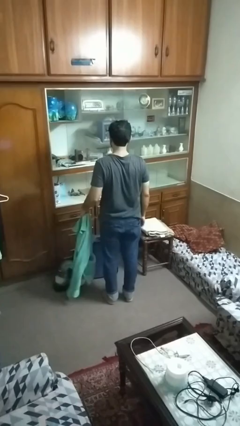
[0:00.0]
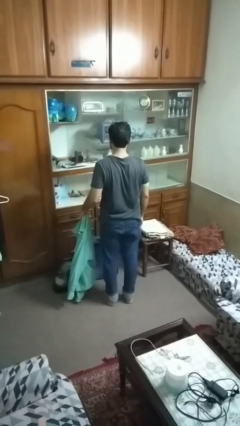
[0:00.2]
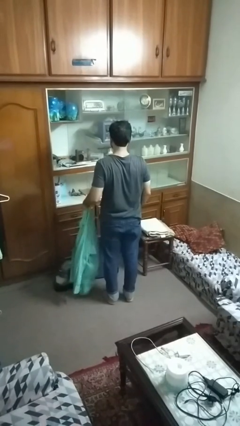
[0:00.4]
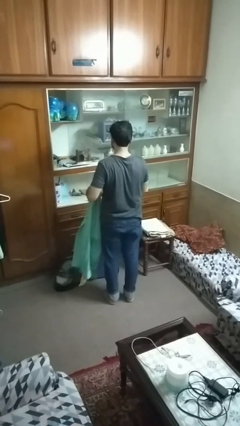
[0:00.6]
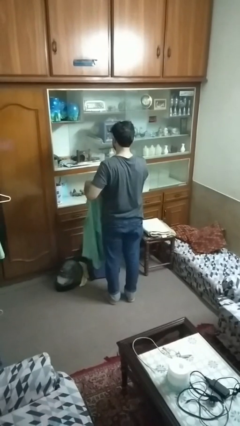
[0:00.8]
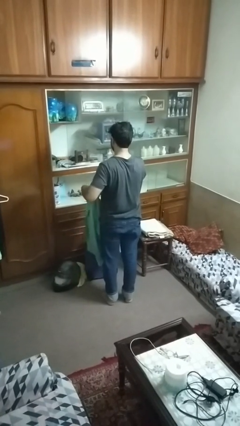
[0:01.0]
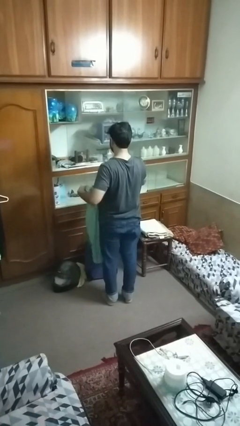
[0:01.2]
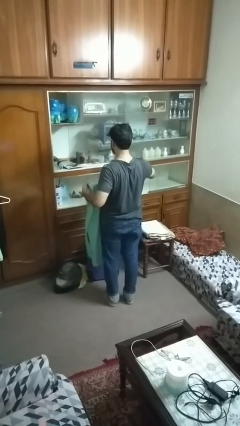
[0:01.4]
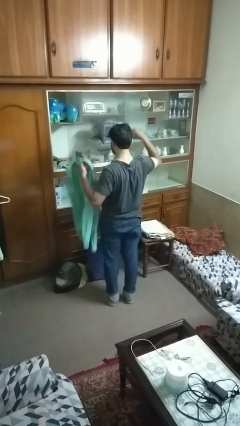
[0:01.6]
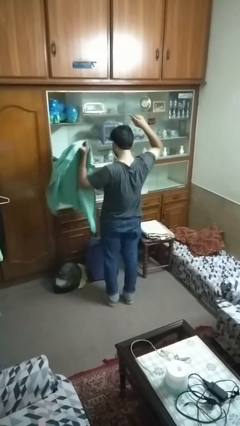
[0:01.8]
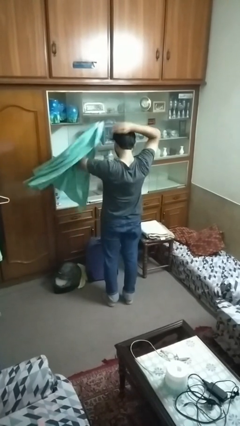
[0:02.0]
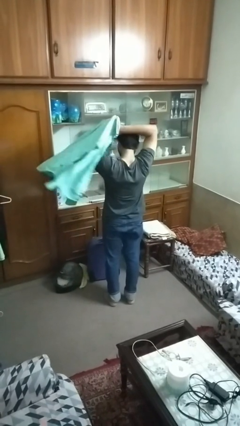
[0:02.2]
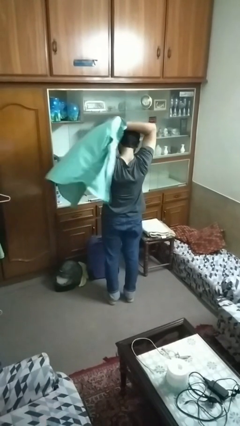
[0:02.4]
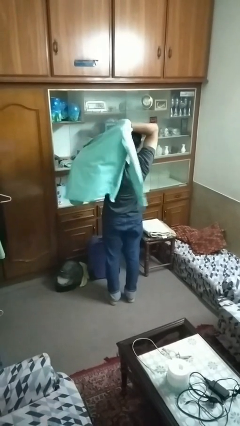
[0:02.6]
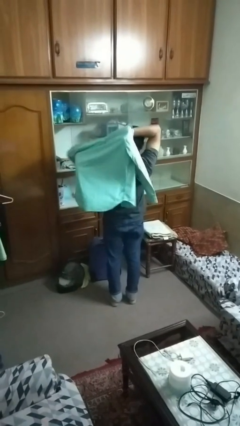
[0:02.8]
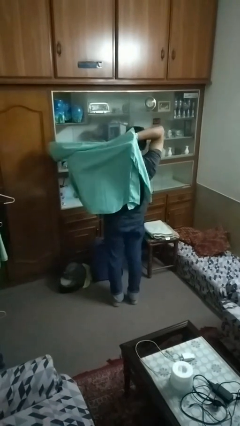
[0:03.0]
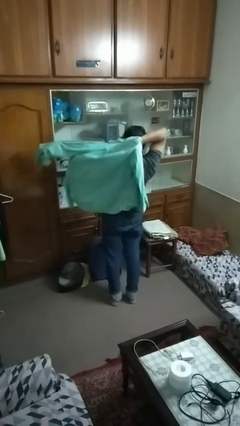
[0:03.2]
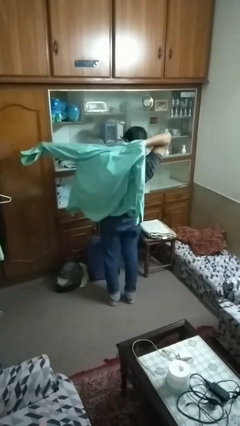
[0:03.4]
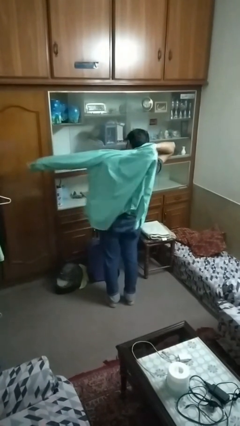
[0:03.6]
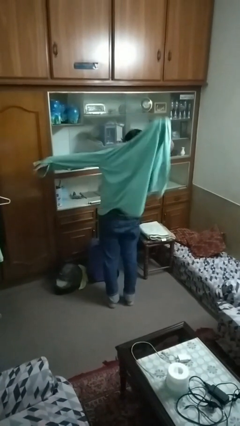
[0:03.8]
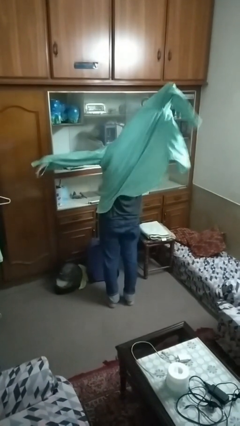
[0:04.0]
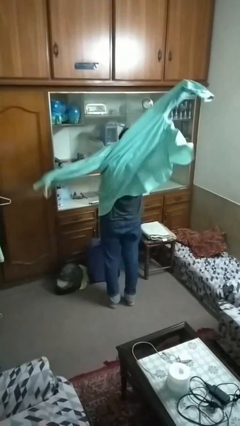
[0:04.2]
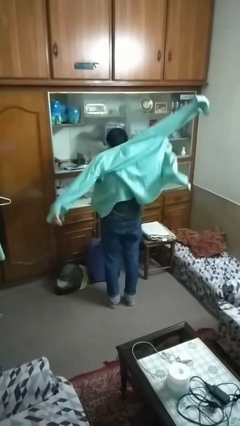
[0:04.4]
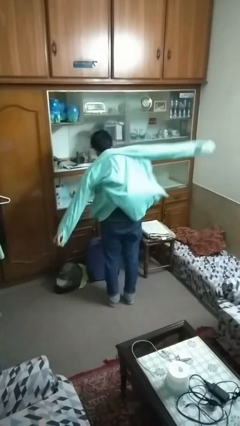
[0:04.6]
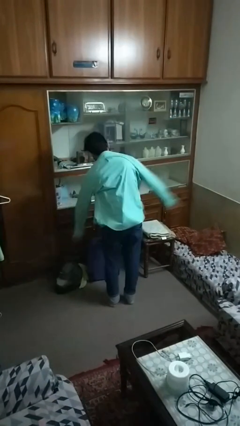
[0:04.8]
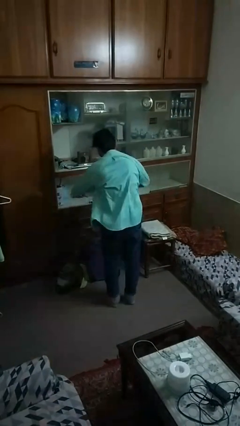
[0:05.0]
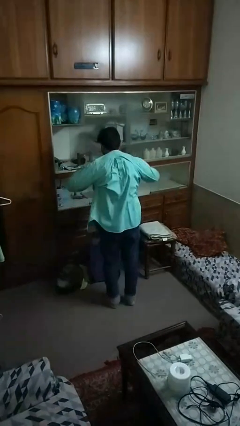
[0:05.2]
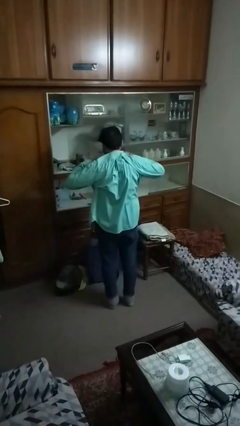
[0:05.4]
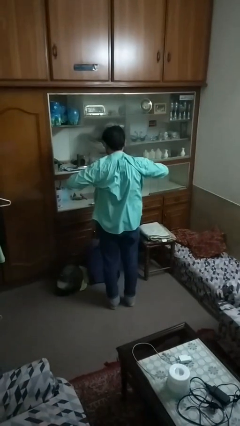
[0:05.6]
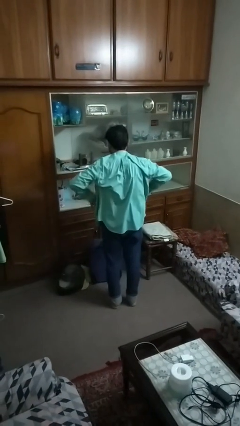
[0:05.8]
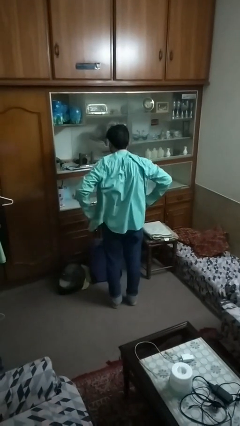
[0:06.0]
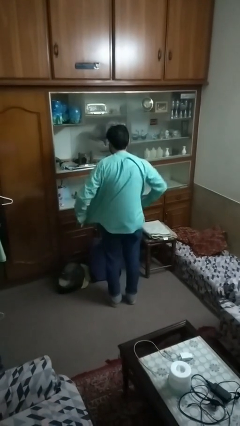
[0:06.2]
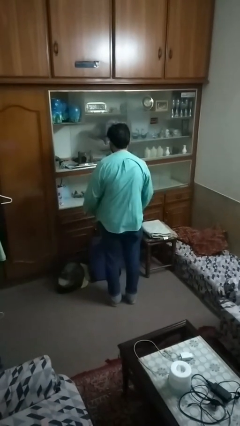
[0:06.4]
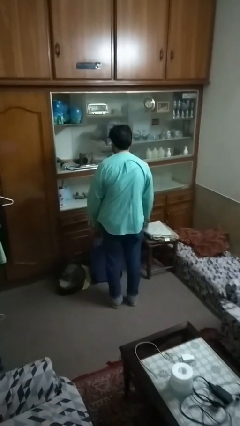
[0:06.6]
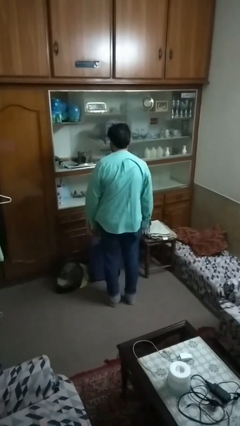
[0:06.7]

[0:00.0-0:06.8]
person puts on shirt

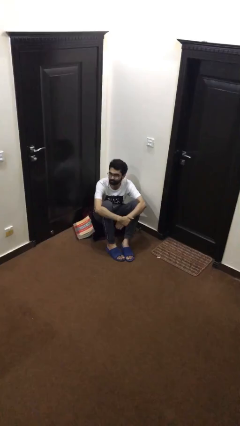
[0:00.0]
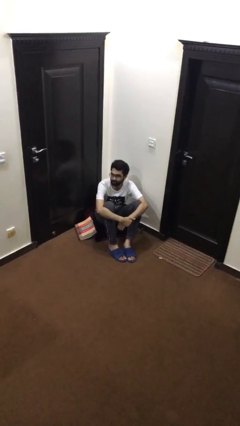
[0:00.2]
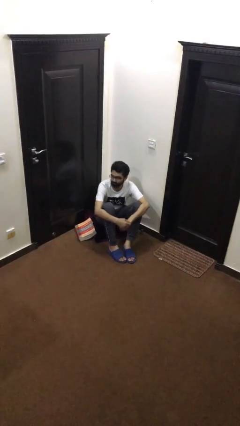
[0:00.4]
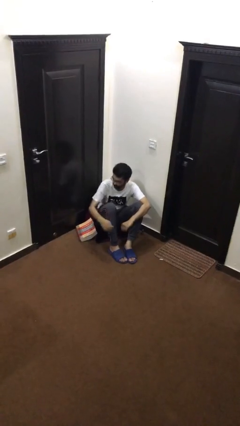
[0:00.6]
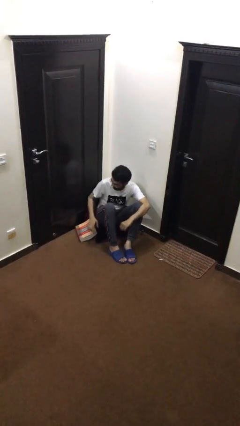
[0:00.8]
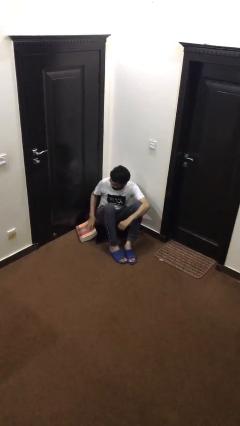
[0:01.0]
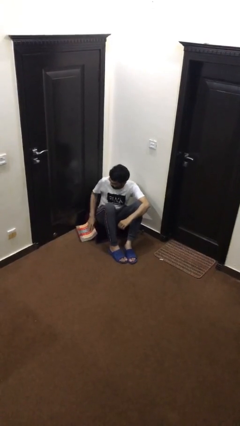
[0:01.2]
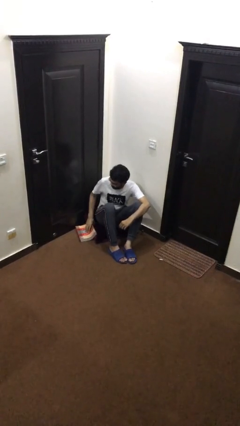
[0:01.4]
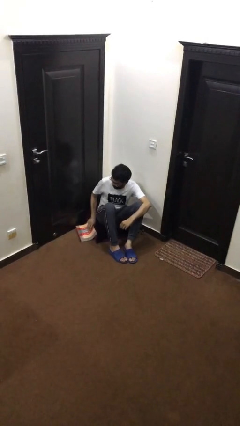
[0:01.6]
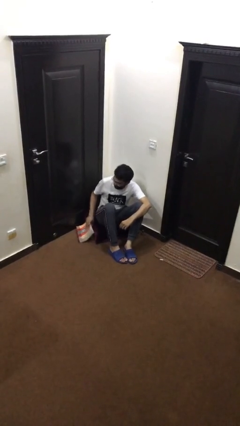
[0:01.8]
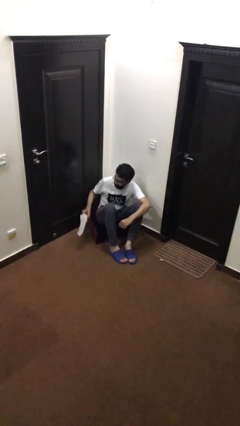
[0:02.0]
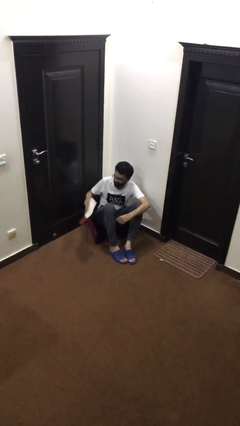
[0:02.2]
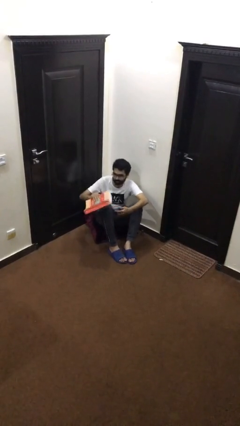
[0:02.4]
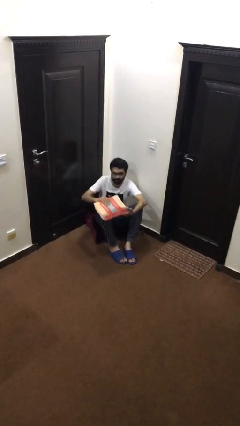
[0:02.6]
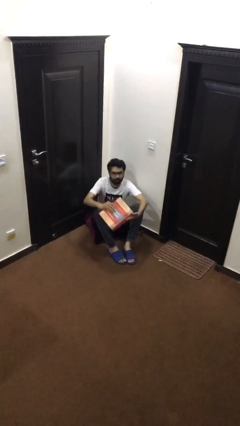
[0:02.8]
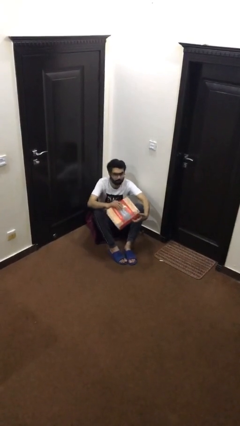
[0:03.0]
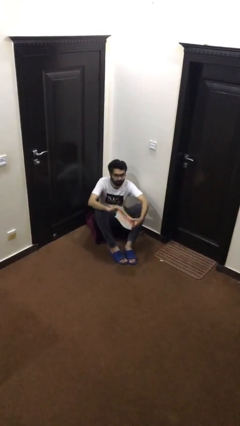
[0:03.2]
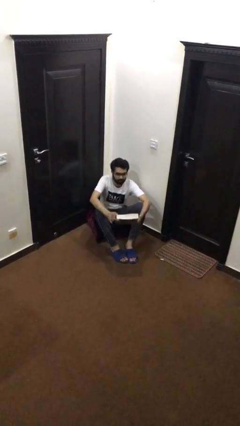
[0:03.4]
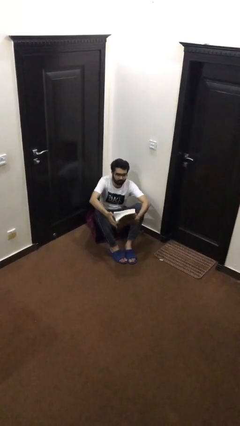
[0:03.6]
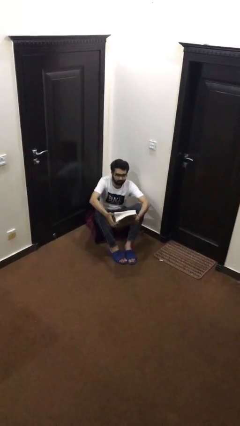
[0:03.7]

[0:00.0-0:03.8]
person picks up object from floor

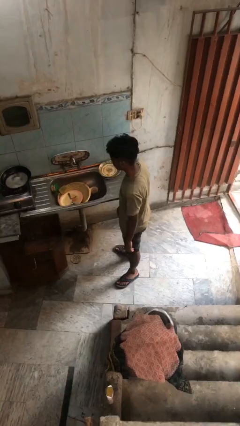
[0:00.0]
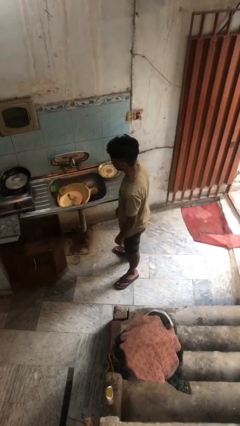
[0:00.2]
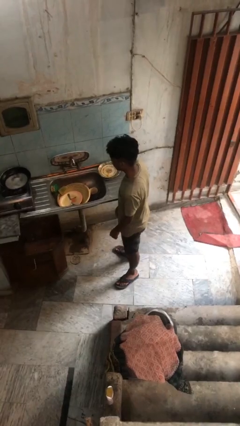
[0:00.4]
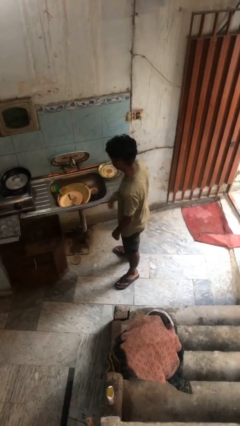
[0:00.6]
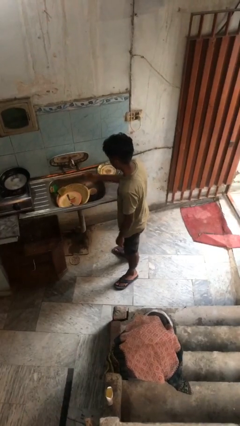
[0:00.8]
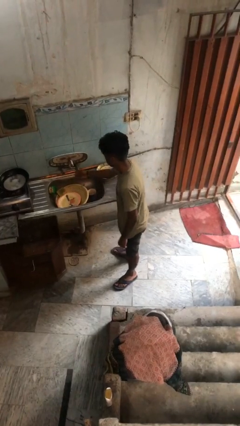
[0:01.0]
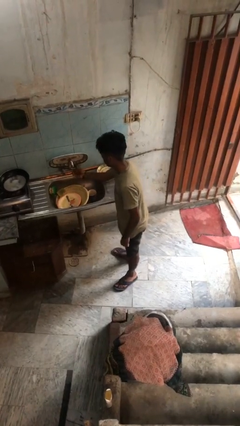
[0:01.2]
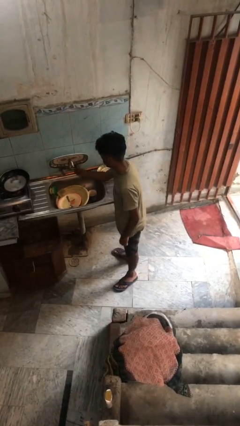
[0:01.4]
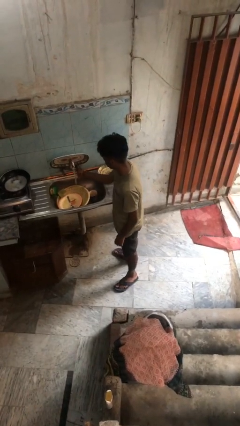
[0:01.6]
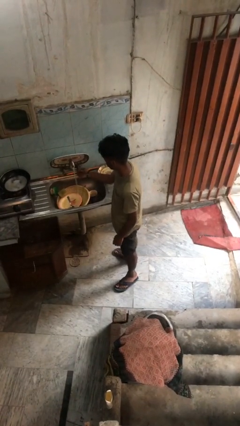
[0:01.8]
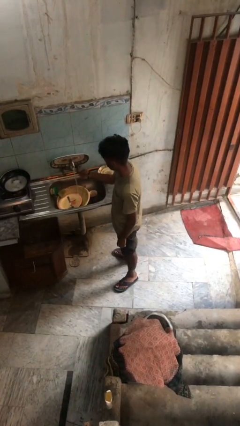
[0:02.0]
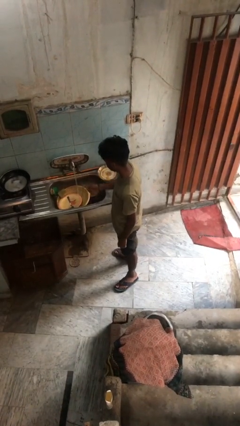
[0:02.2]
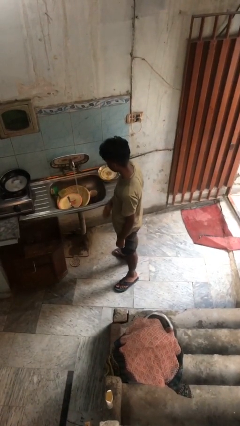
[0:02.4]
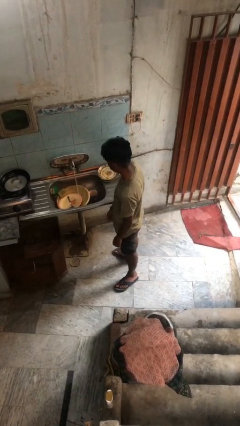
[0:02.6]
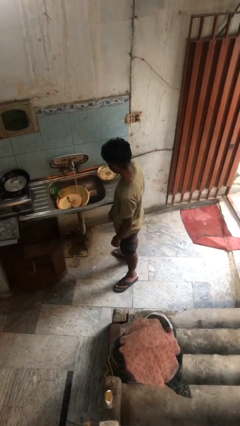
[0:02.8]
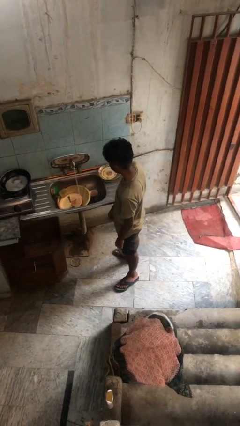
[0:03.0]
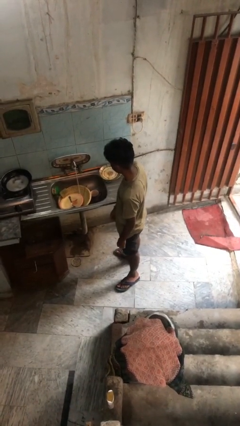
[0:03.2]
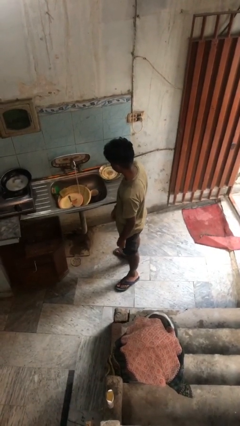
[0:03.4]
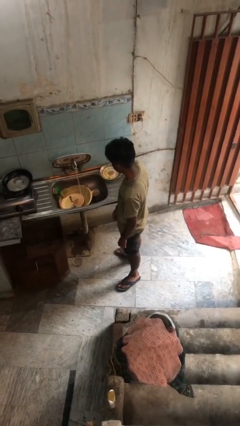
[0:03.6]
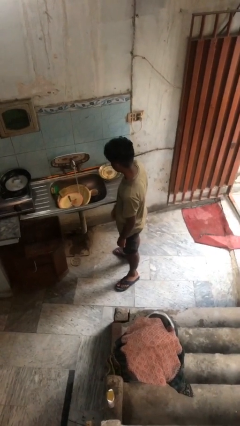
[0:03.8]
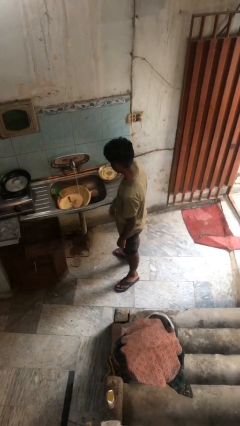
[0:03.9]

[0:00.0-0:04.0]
person turns on faucet

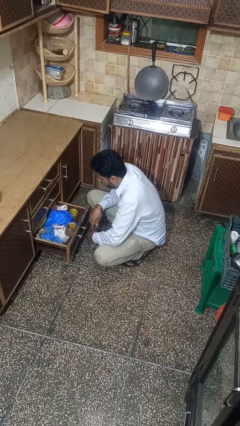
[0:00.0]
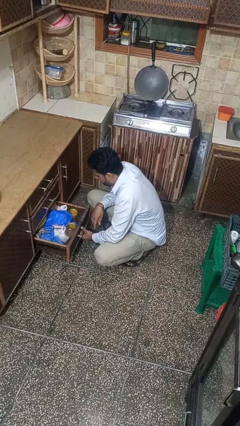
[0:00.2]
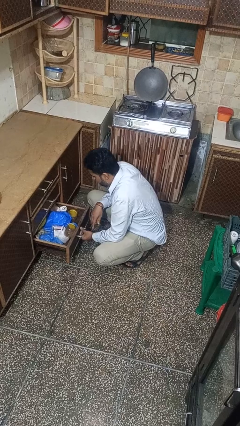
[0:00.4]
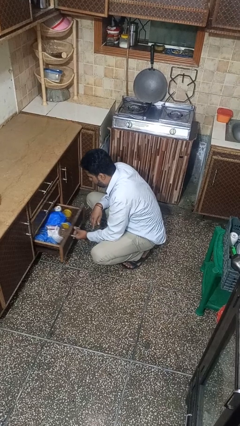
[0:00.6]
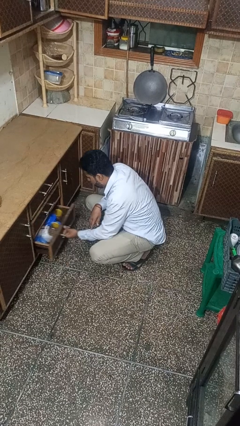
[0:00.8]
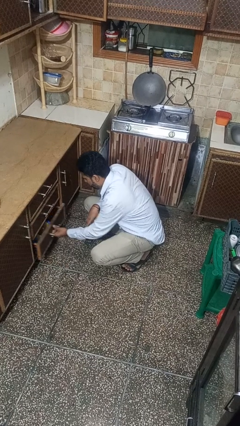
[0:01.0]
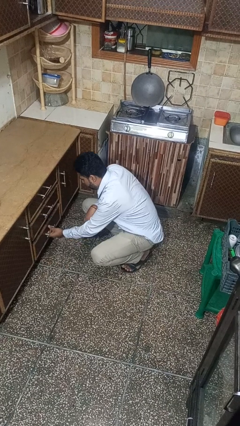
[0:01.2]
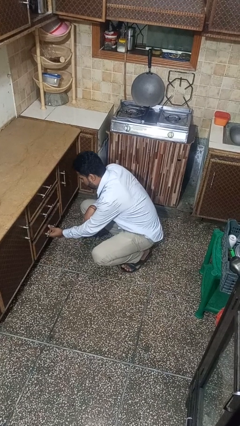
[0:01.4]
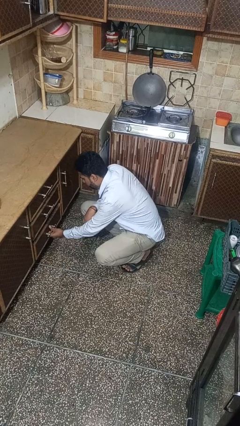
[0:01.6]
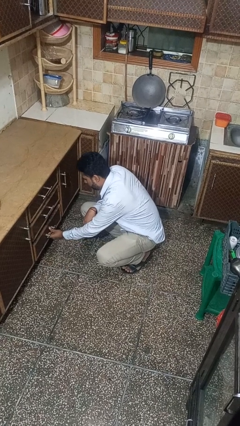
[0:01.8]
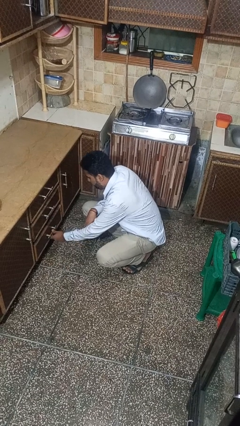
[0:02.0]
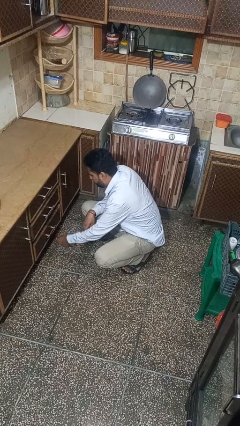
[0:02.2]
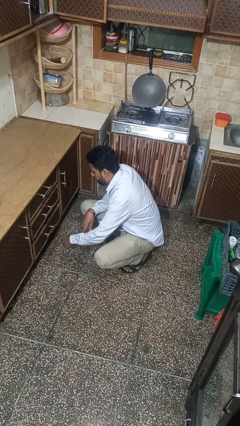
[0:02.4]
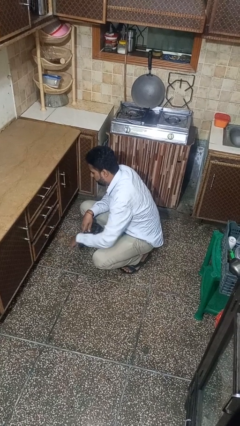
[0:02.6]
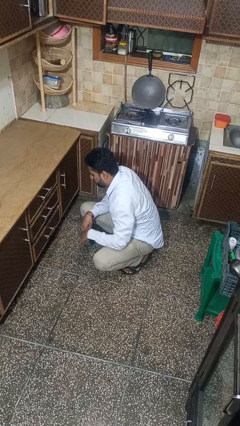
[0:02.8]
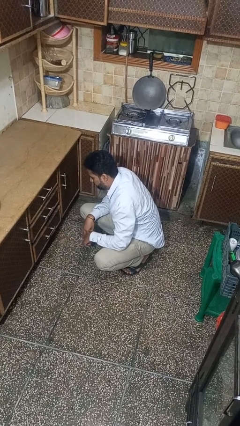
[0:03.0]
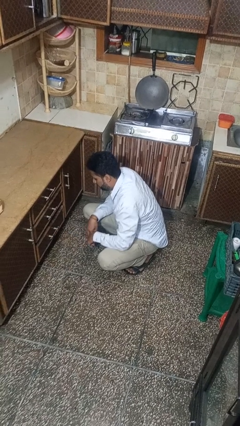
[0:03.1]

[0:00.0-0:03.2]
person closes kitchen drawer

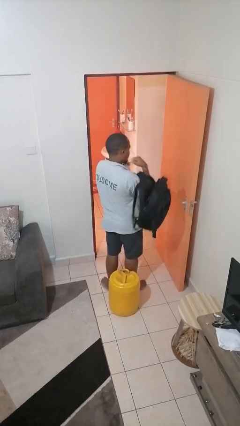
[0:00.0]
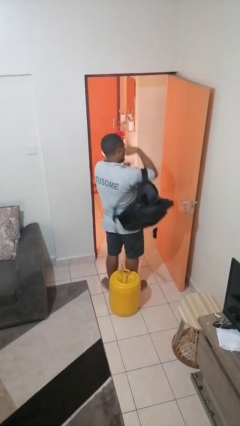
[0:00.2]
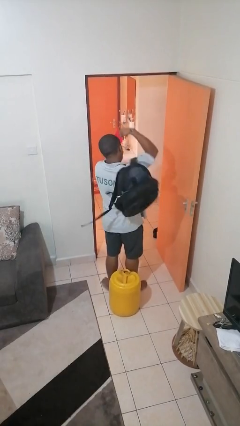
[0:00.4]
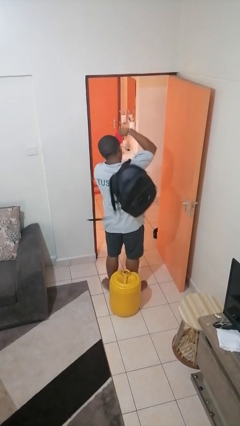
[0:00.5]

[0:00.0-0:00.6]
person puts object into backpack
